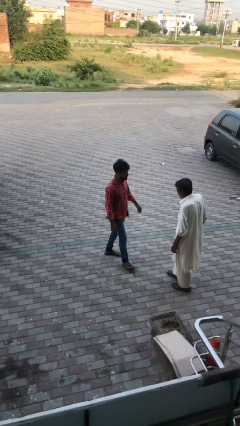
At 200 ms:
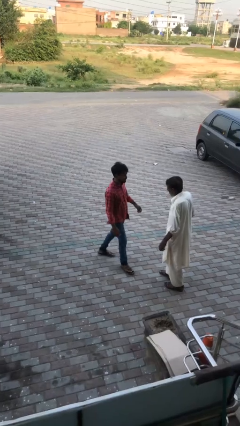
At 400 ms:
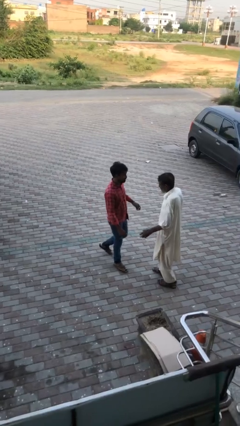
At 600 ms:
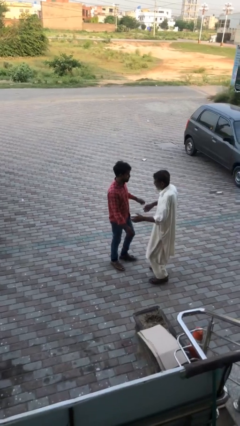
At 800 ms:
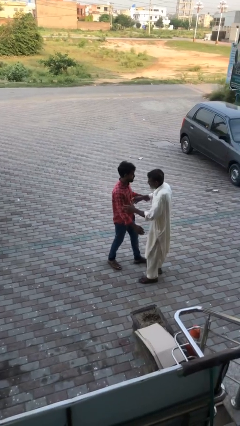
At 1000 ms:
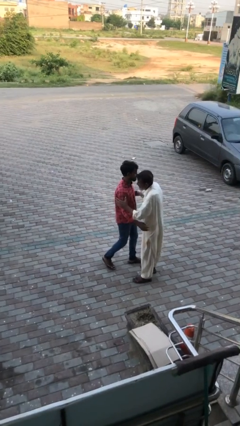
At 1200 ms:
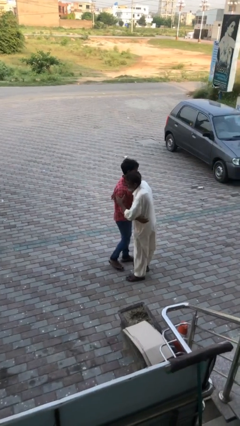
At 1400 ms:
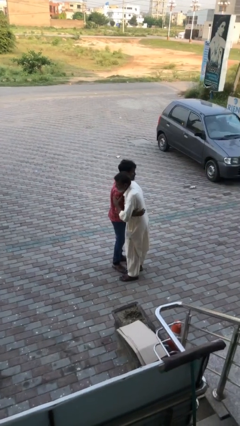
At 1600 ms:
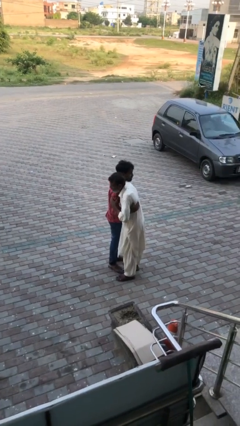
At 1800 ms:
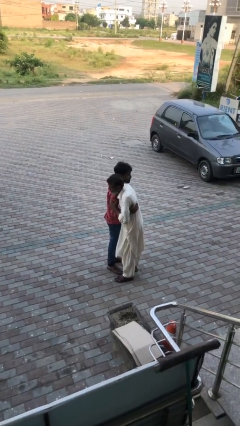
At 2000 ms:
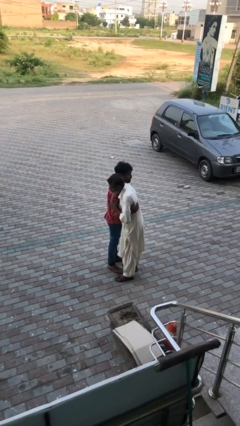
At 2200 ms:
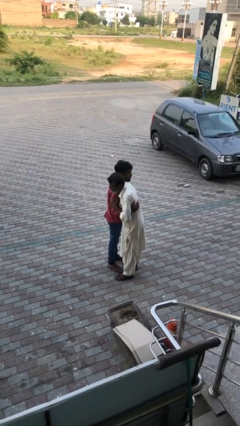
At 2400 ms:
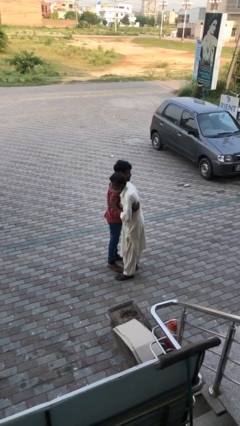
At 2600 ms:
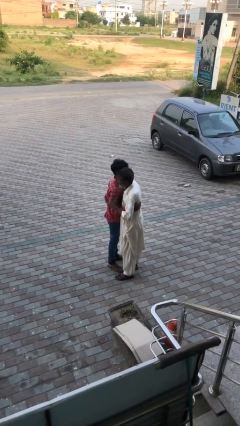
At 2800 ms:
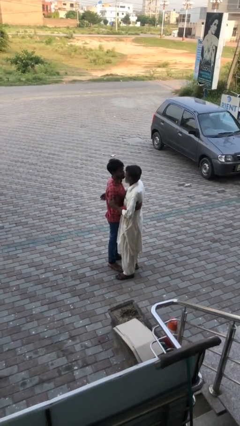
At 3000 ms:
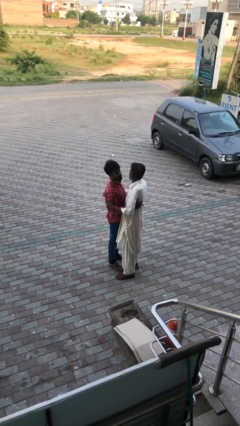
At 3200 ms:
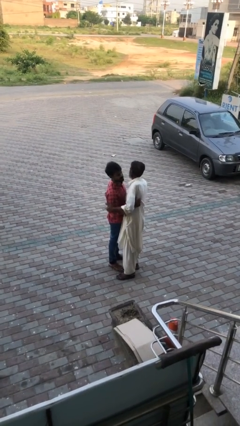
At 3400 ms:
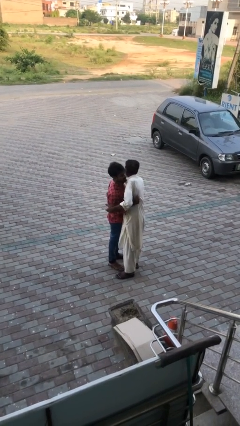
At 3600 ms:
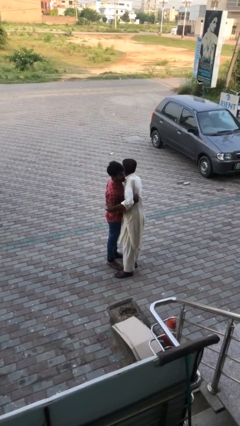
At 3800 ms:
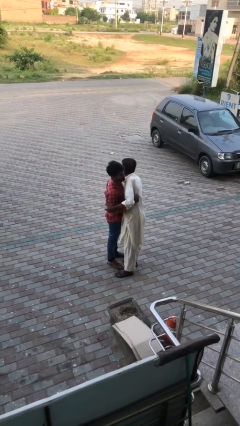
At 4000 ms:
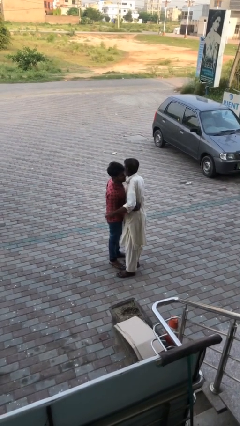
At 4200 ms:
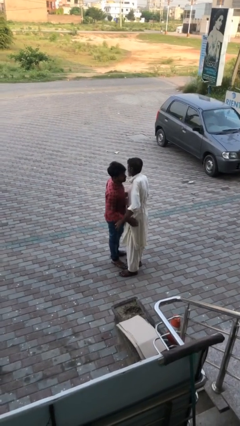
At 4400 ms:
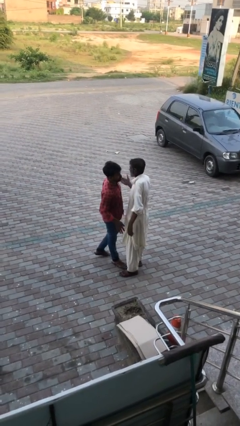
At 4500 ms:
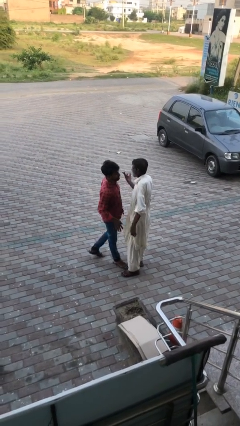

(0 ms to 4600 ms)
person embraces person

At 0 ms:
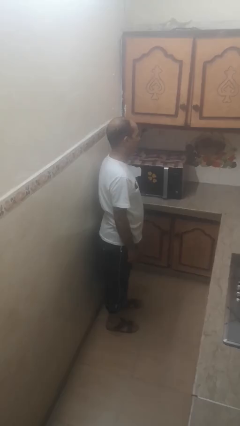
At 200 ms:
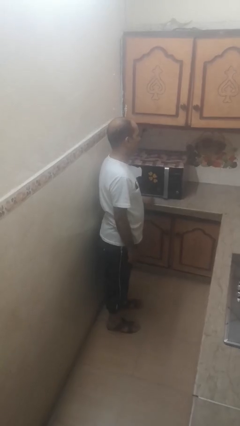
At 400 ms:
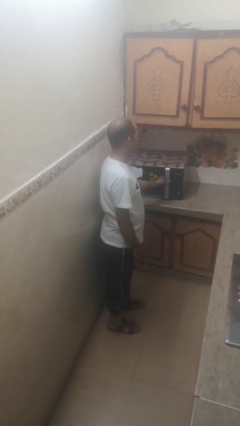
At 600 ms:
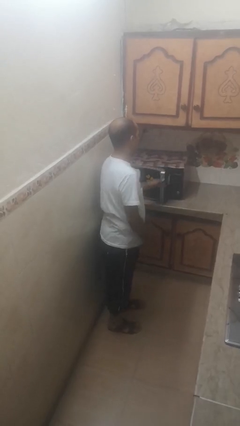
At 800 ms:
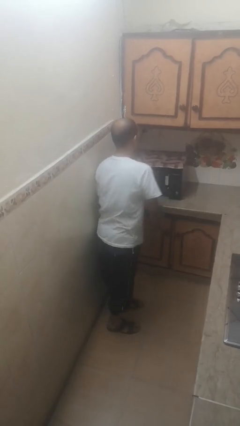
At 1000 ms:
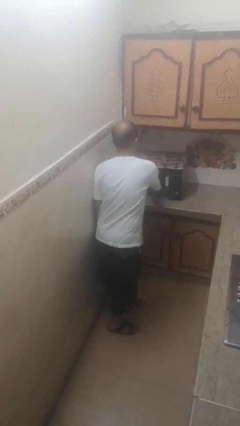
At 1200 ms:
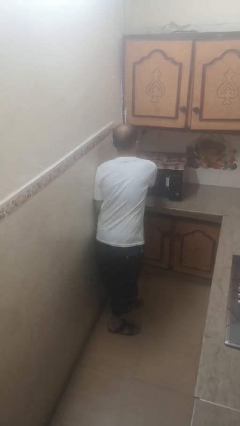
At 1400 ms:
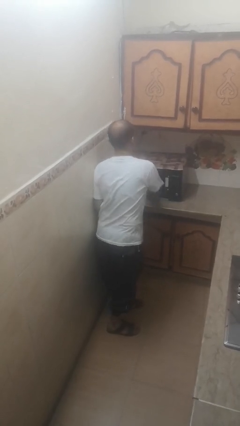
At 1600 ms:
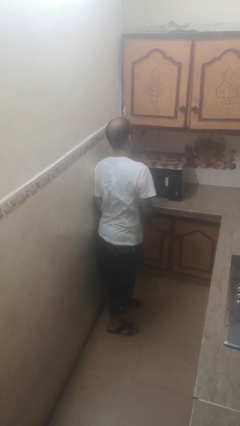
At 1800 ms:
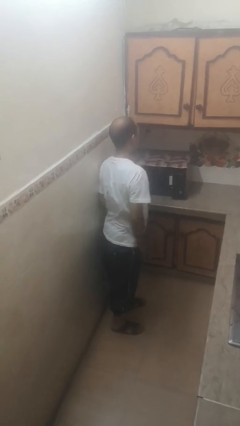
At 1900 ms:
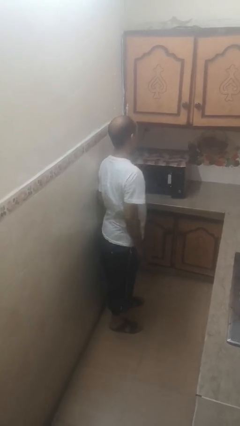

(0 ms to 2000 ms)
person takes object from microwave

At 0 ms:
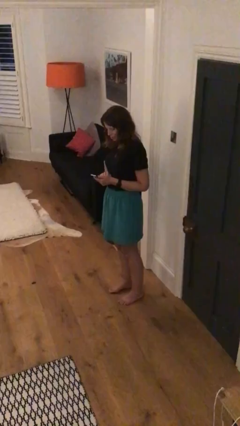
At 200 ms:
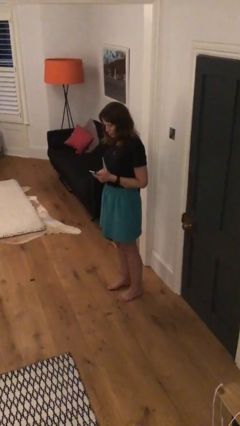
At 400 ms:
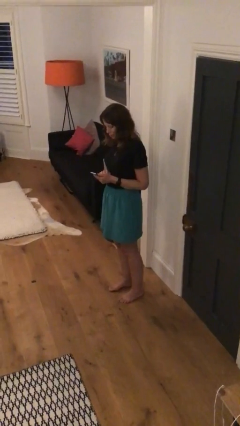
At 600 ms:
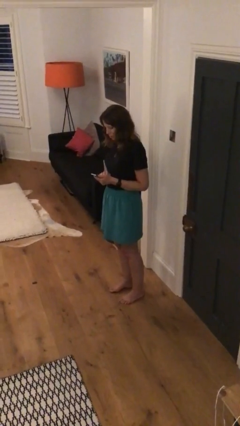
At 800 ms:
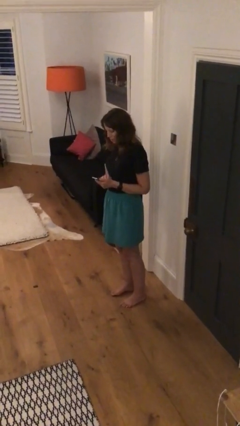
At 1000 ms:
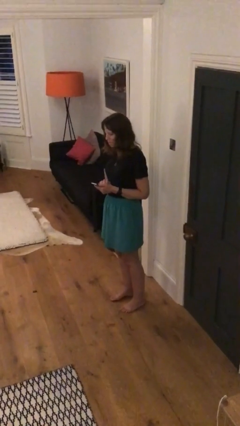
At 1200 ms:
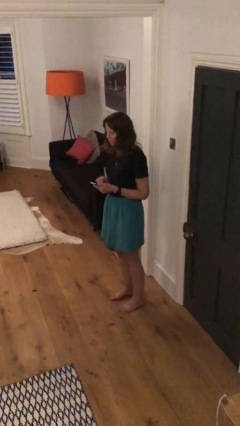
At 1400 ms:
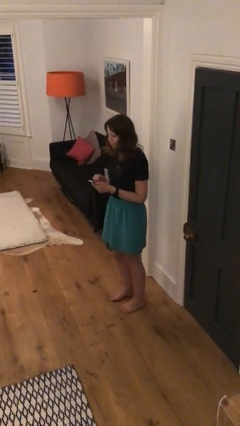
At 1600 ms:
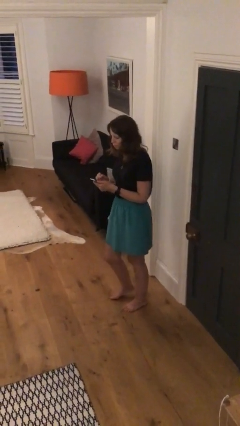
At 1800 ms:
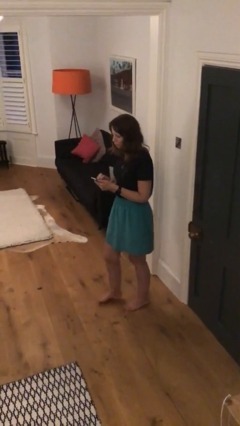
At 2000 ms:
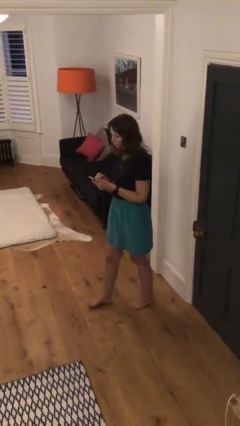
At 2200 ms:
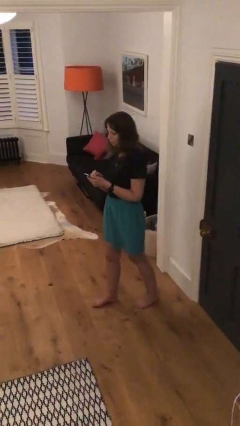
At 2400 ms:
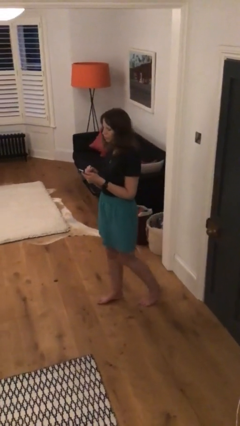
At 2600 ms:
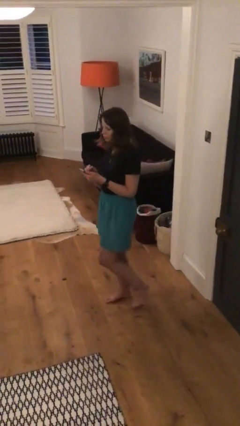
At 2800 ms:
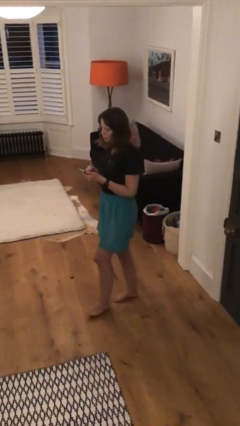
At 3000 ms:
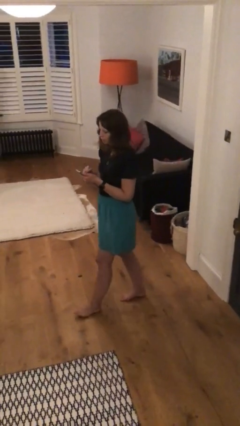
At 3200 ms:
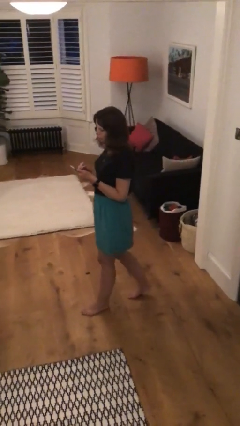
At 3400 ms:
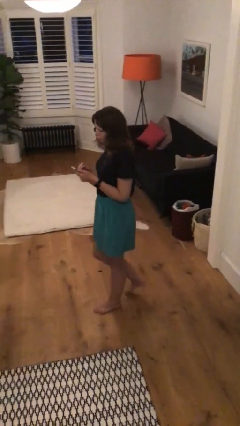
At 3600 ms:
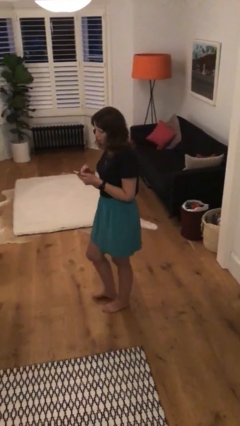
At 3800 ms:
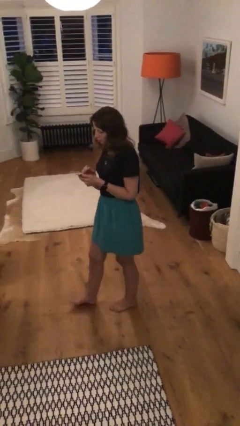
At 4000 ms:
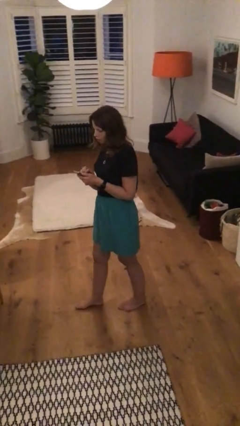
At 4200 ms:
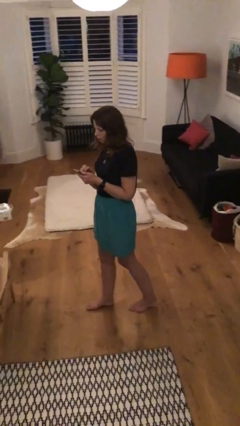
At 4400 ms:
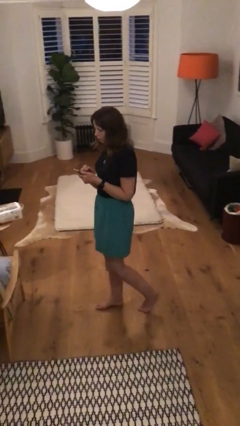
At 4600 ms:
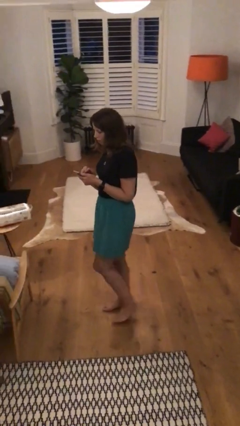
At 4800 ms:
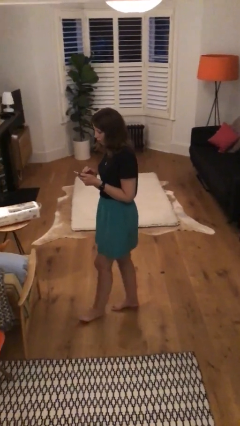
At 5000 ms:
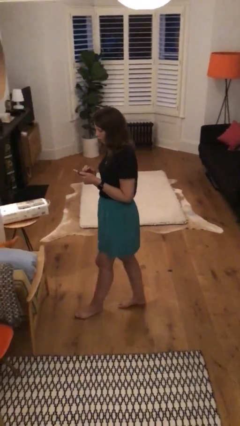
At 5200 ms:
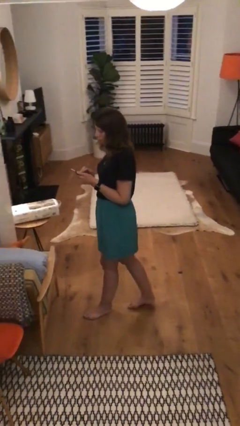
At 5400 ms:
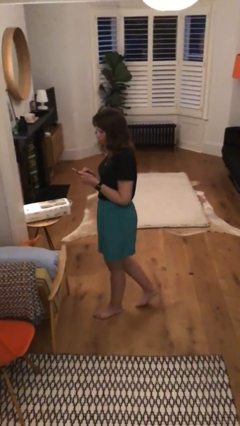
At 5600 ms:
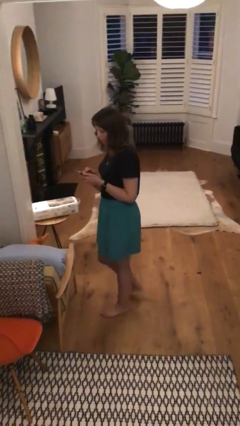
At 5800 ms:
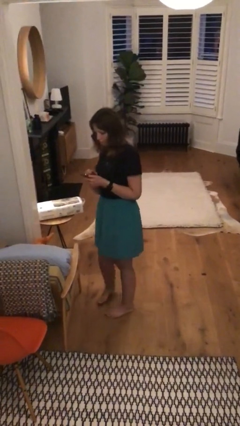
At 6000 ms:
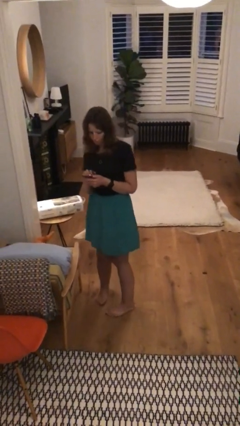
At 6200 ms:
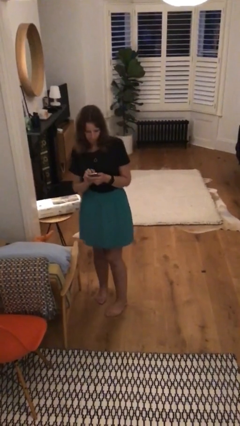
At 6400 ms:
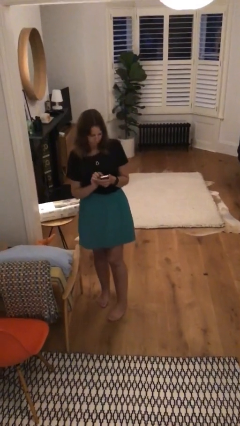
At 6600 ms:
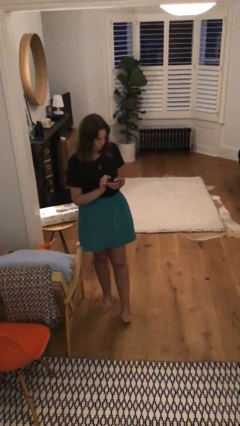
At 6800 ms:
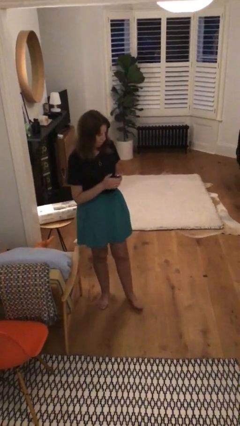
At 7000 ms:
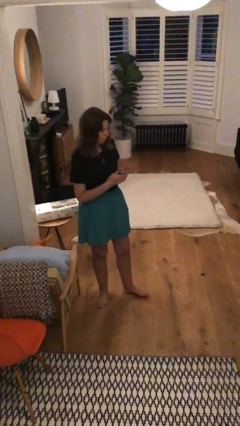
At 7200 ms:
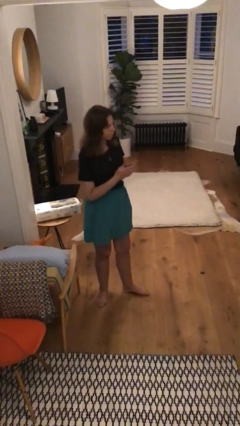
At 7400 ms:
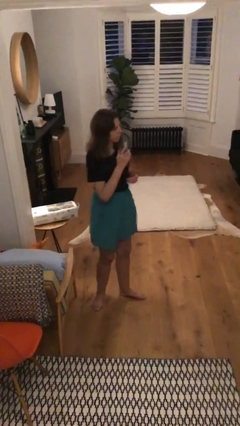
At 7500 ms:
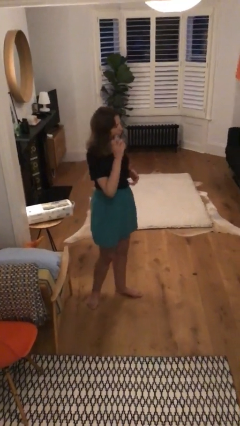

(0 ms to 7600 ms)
person texts on phone

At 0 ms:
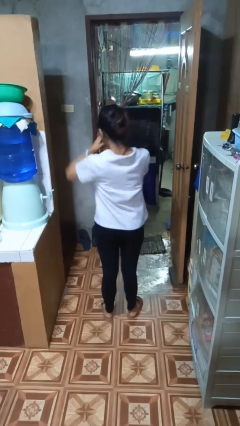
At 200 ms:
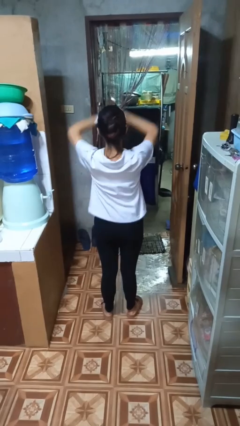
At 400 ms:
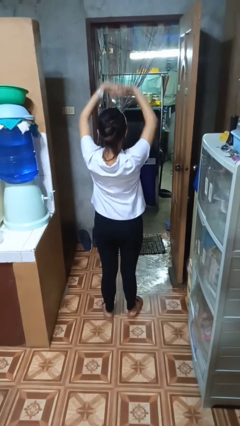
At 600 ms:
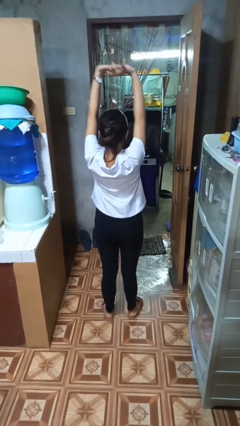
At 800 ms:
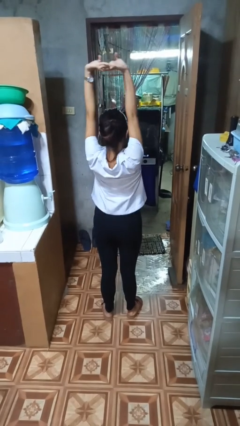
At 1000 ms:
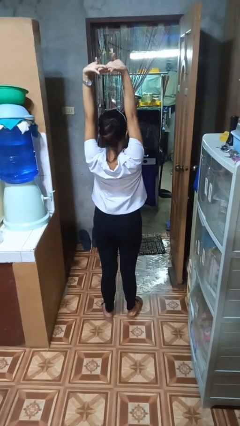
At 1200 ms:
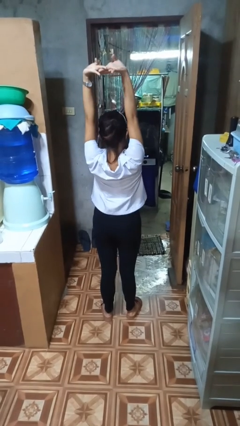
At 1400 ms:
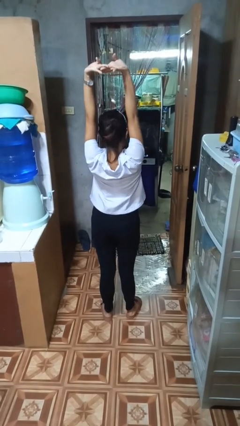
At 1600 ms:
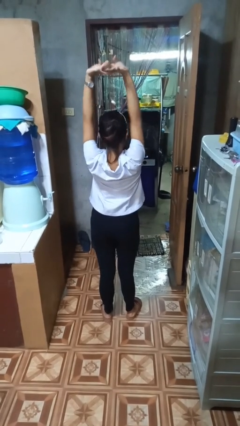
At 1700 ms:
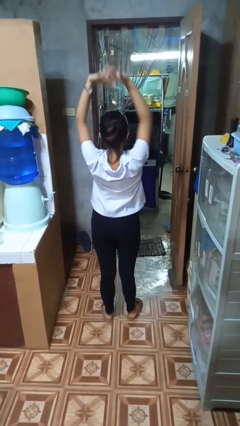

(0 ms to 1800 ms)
person stretches arms over head

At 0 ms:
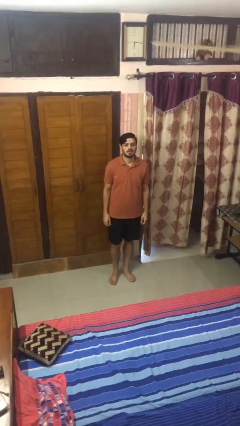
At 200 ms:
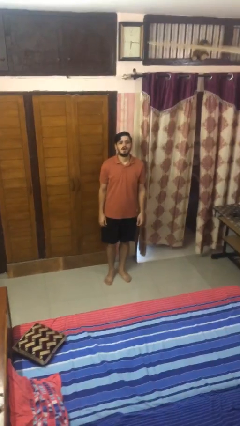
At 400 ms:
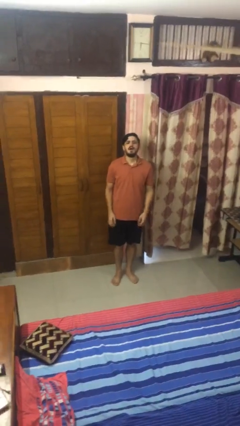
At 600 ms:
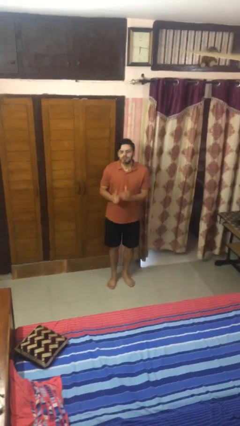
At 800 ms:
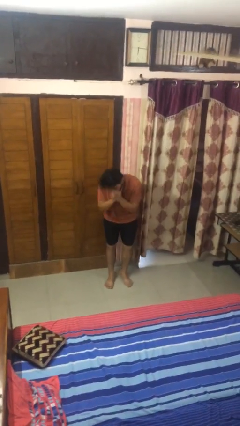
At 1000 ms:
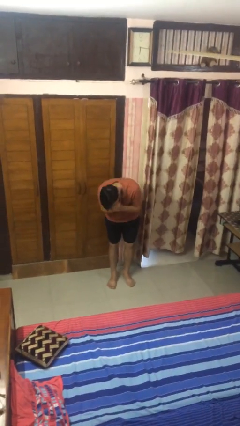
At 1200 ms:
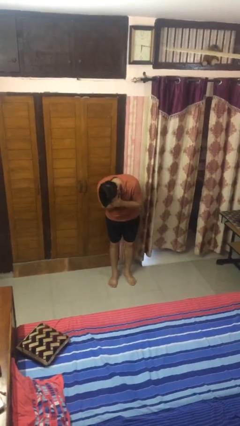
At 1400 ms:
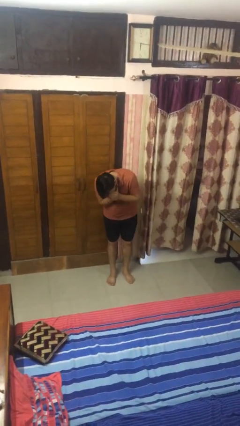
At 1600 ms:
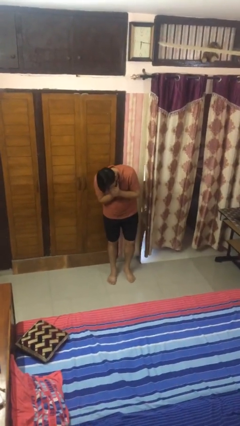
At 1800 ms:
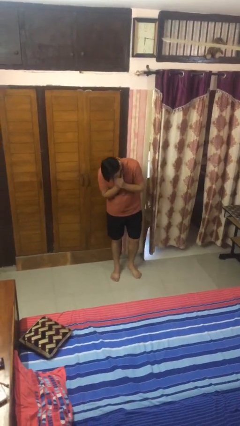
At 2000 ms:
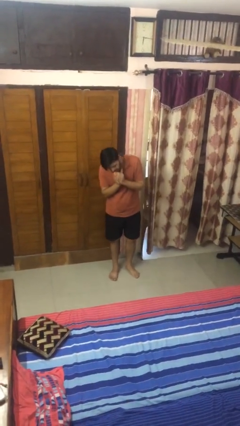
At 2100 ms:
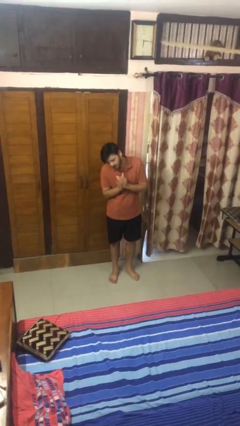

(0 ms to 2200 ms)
person sneezes into hand
